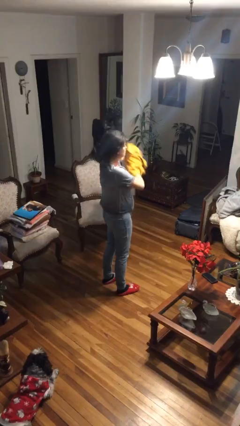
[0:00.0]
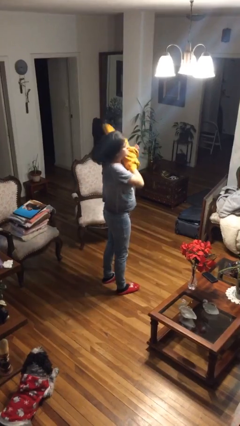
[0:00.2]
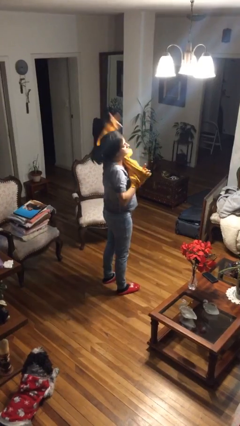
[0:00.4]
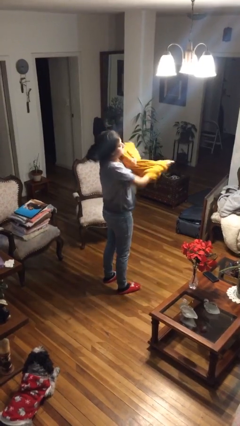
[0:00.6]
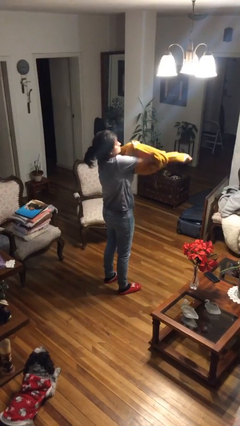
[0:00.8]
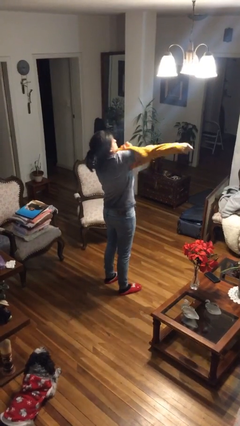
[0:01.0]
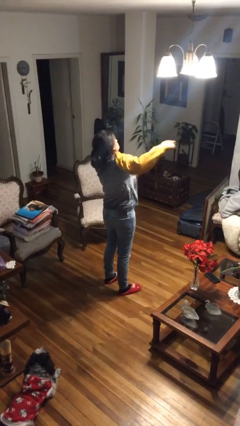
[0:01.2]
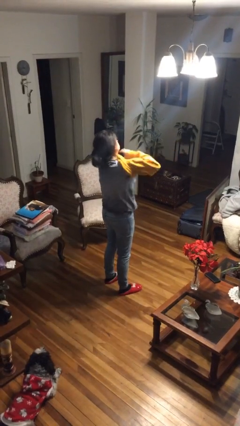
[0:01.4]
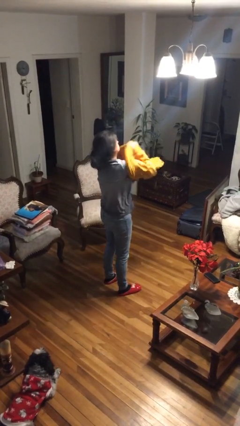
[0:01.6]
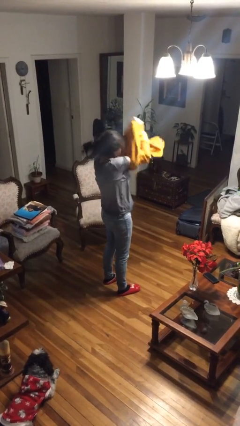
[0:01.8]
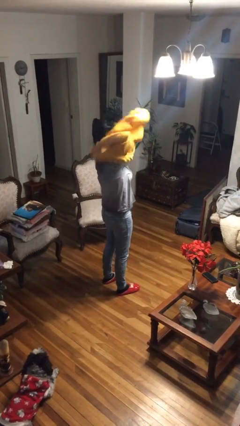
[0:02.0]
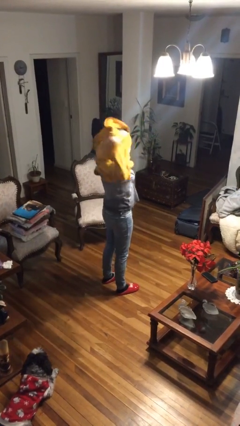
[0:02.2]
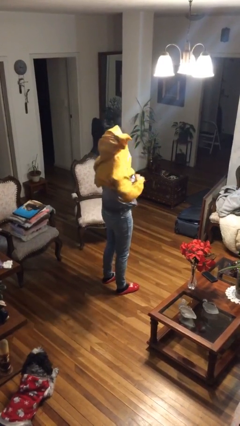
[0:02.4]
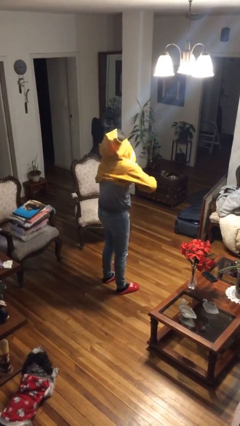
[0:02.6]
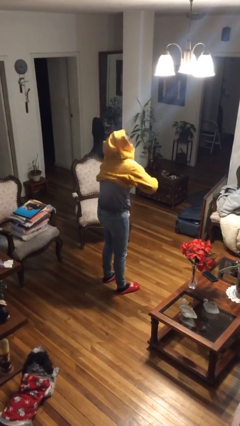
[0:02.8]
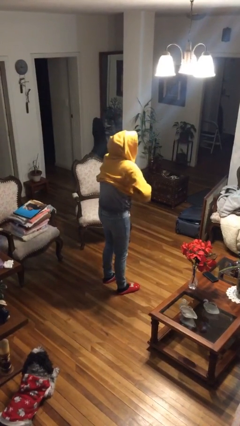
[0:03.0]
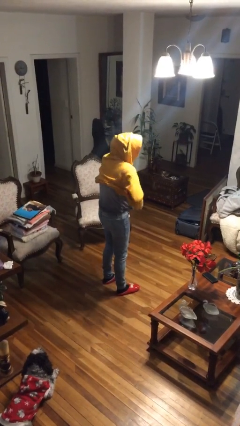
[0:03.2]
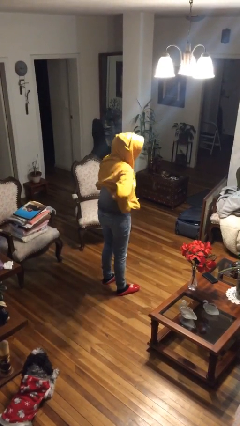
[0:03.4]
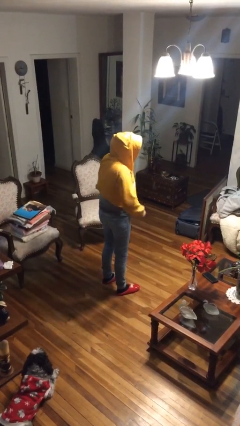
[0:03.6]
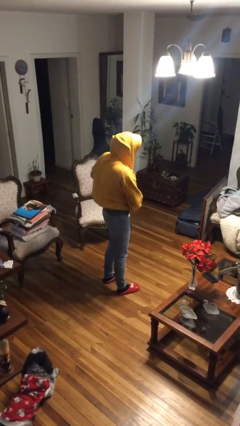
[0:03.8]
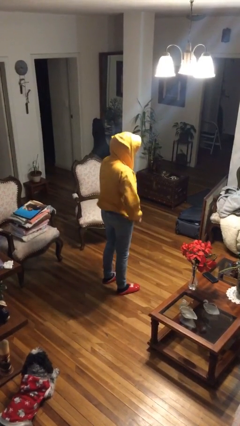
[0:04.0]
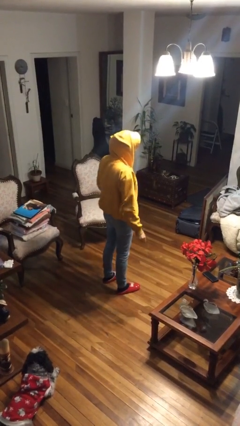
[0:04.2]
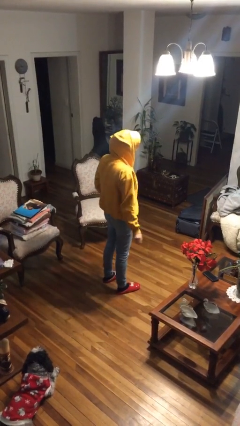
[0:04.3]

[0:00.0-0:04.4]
person puts on hoodie

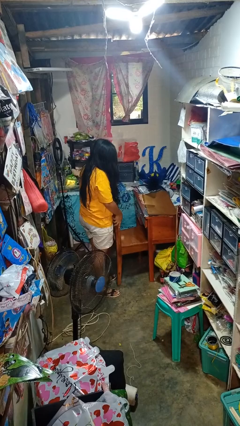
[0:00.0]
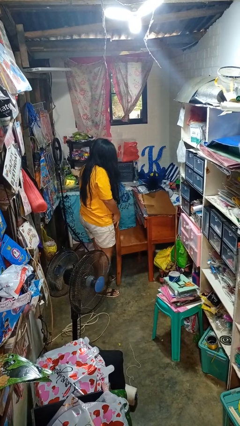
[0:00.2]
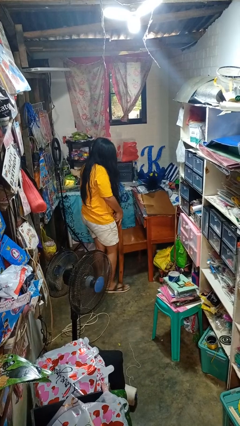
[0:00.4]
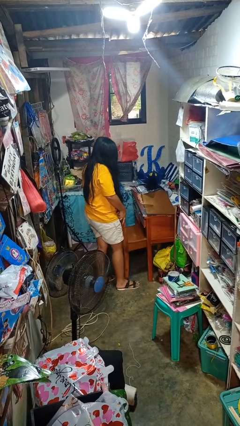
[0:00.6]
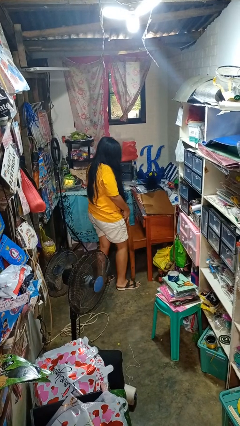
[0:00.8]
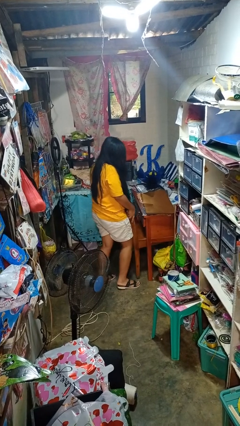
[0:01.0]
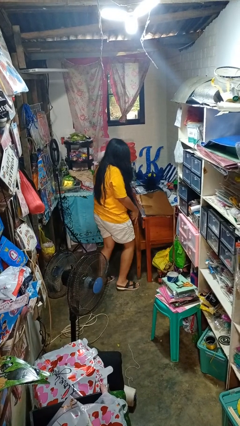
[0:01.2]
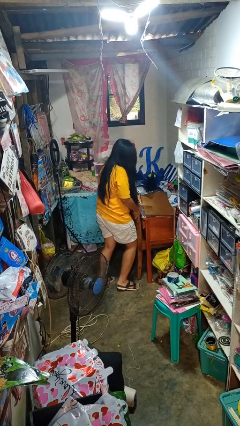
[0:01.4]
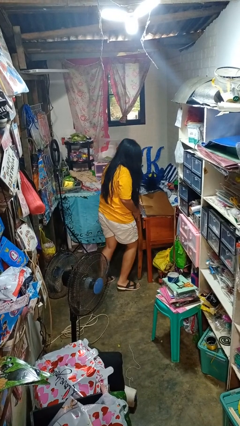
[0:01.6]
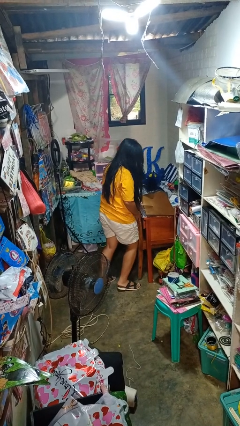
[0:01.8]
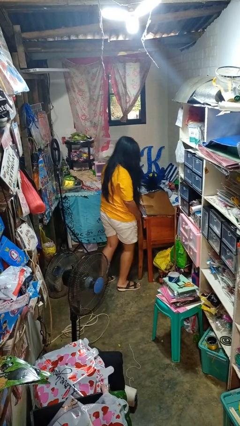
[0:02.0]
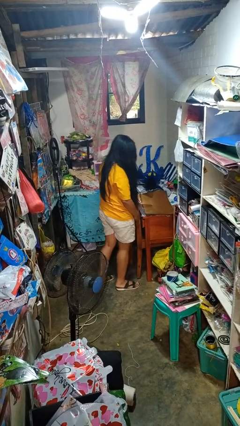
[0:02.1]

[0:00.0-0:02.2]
person pushes in chair

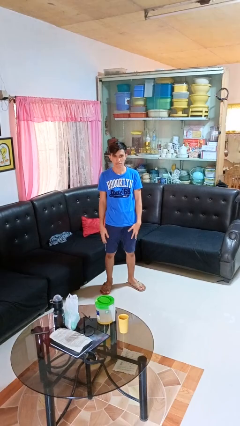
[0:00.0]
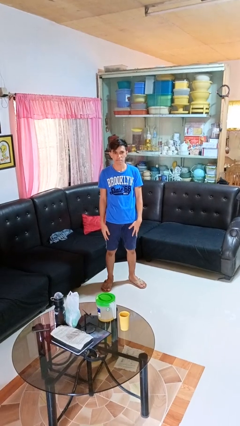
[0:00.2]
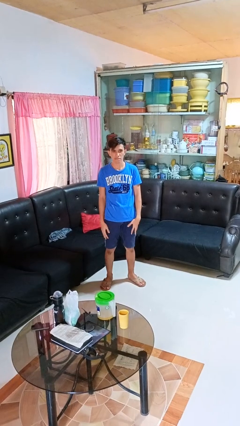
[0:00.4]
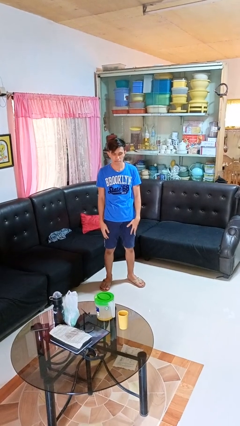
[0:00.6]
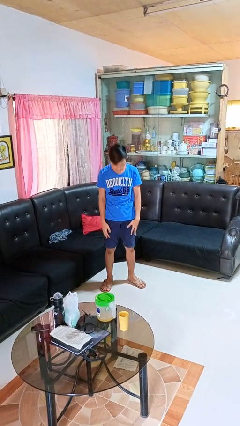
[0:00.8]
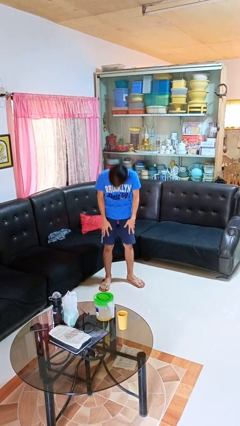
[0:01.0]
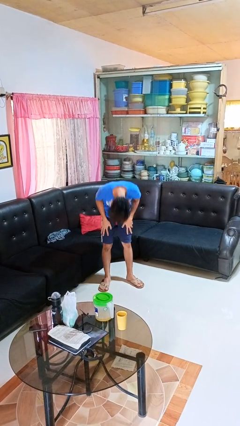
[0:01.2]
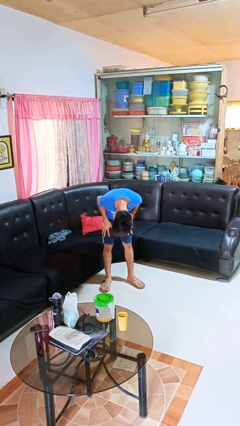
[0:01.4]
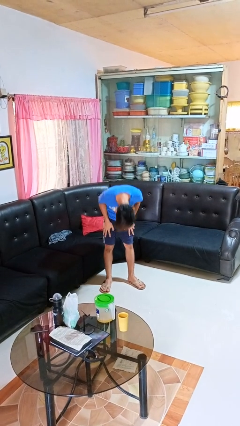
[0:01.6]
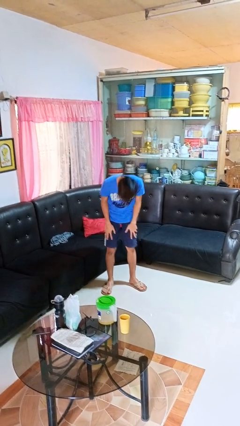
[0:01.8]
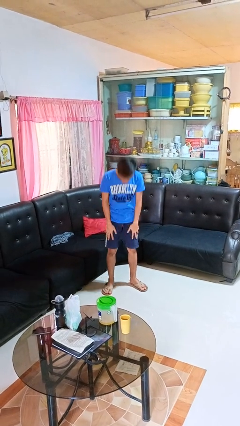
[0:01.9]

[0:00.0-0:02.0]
person bows

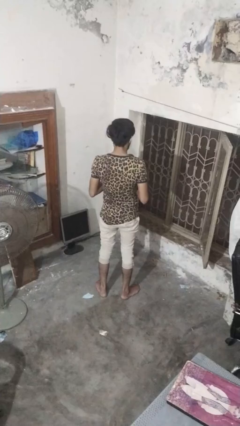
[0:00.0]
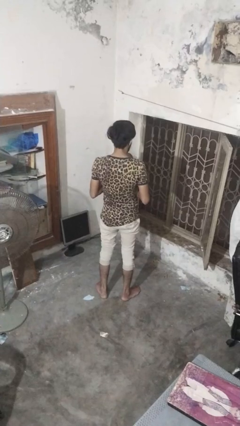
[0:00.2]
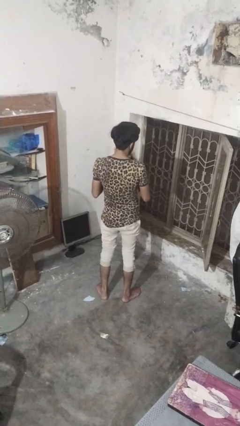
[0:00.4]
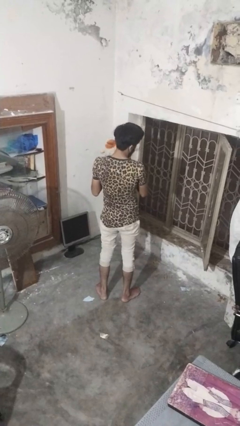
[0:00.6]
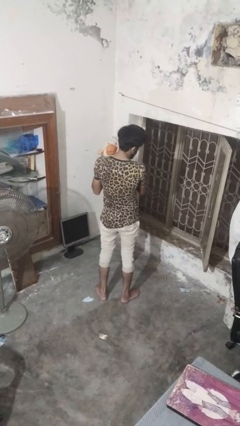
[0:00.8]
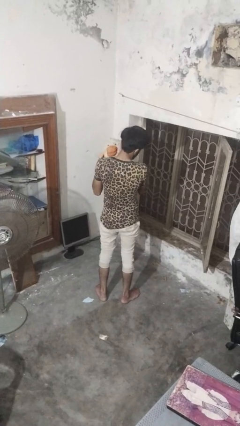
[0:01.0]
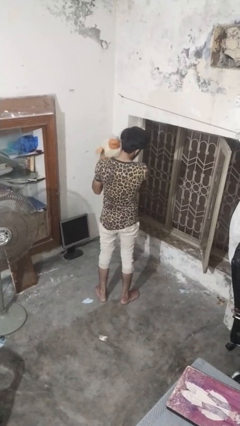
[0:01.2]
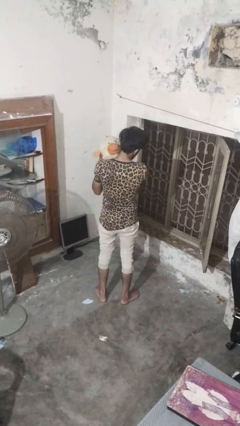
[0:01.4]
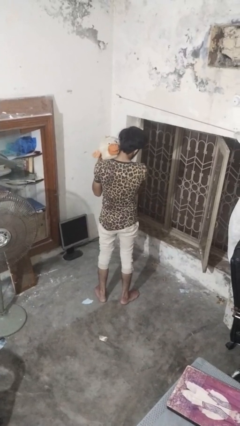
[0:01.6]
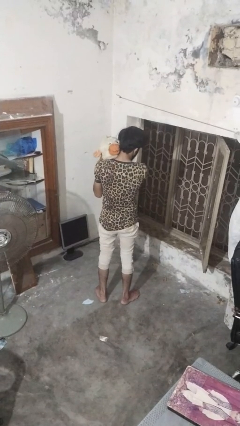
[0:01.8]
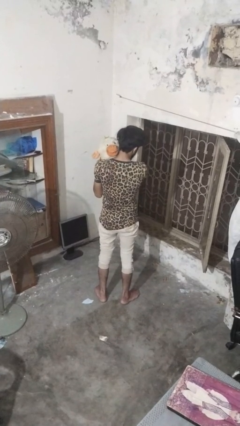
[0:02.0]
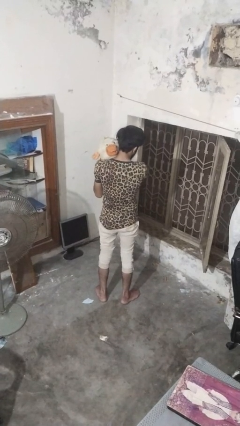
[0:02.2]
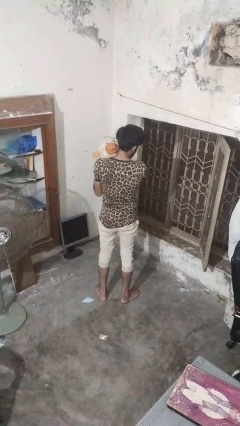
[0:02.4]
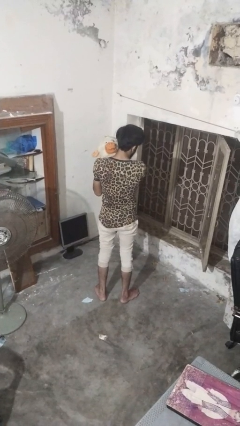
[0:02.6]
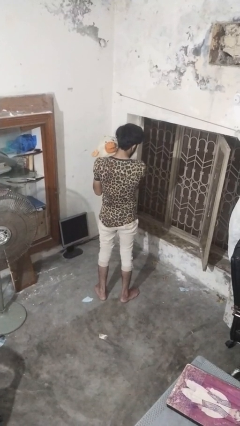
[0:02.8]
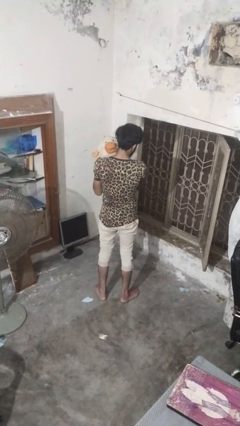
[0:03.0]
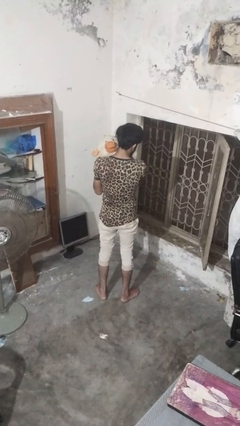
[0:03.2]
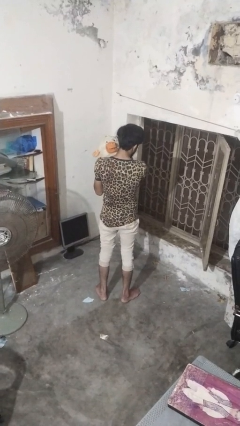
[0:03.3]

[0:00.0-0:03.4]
person hugs stuffed animal

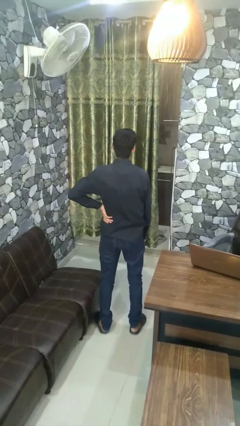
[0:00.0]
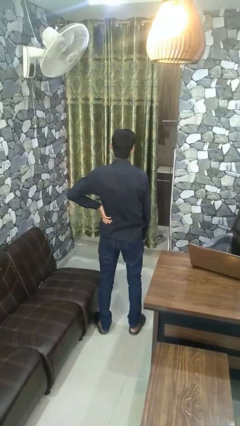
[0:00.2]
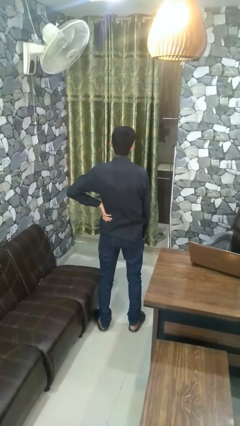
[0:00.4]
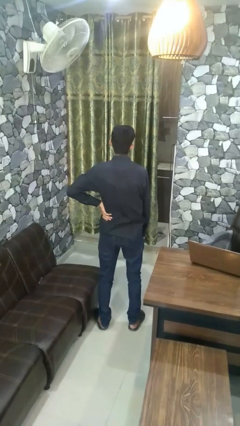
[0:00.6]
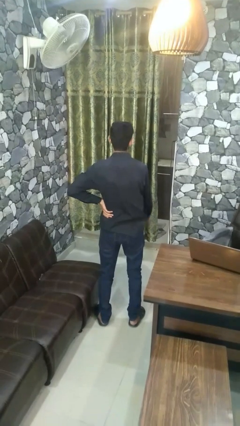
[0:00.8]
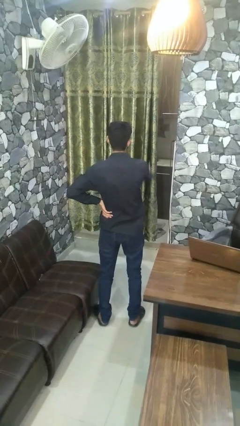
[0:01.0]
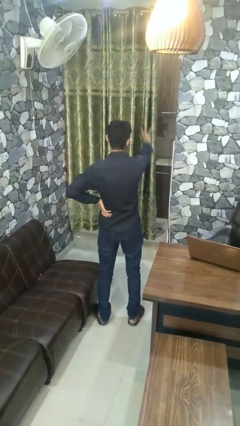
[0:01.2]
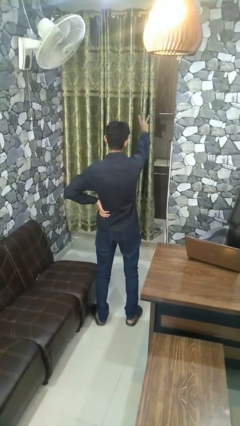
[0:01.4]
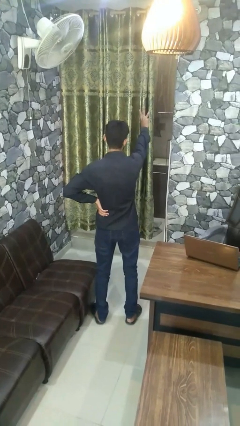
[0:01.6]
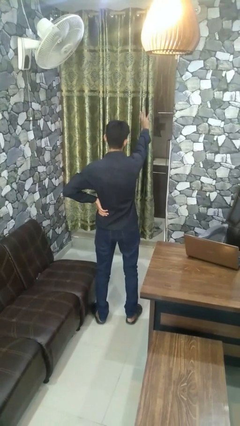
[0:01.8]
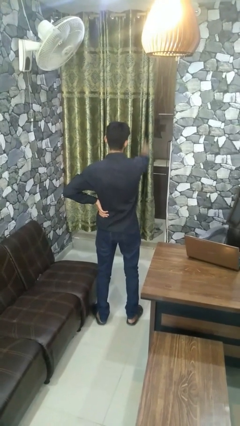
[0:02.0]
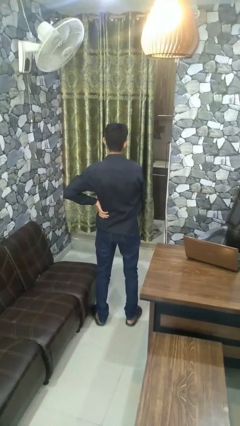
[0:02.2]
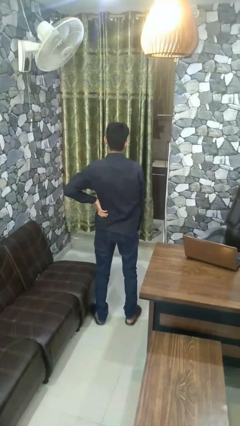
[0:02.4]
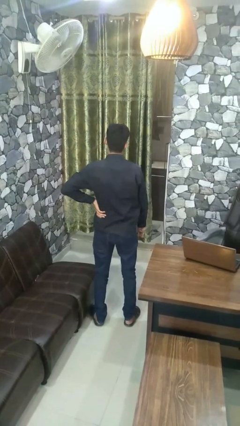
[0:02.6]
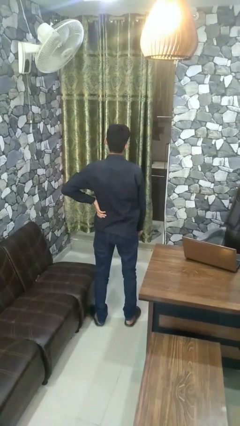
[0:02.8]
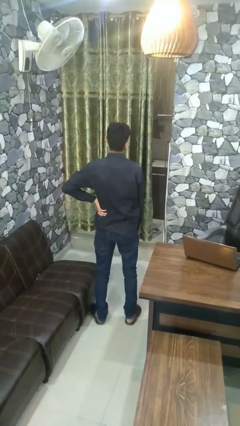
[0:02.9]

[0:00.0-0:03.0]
person gestures number three

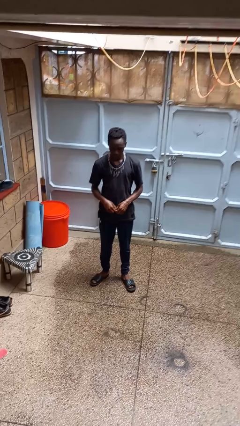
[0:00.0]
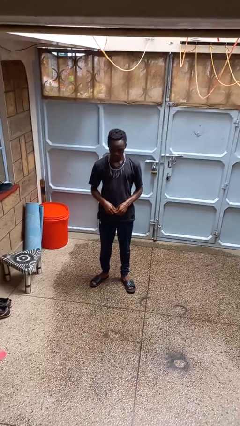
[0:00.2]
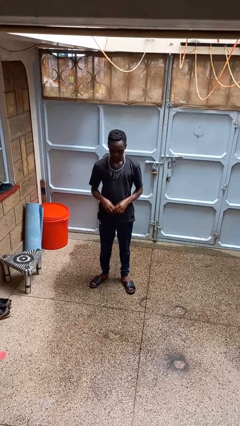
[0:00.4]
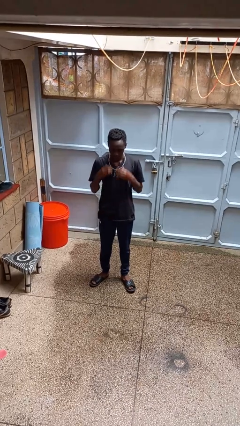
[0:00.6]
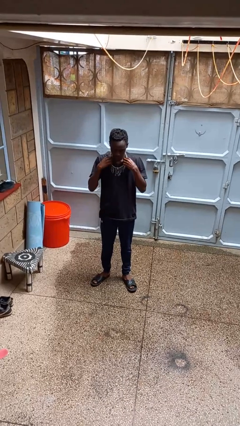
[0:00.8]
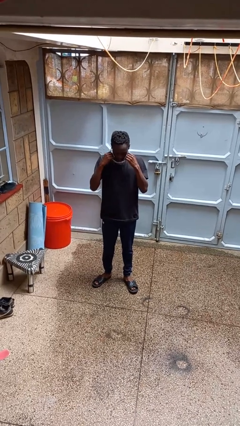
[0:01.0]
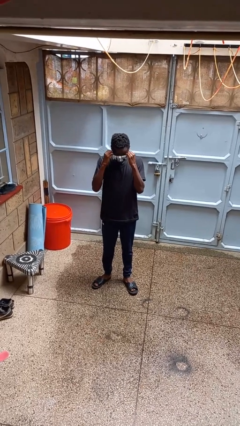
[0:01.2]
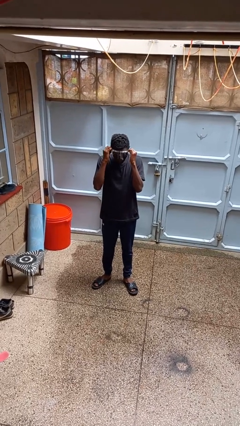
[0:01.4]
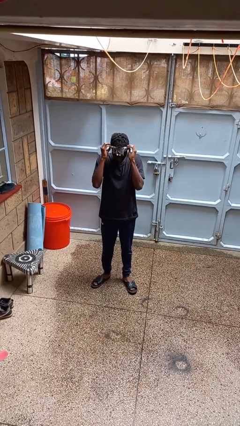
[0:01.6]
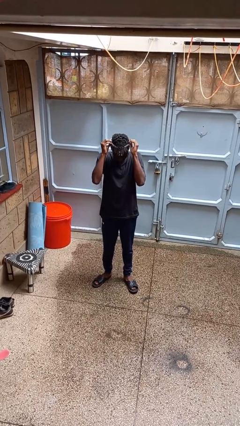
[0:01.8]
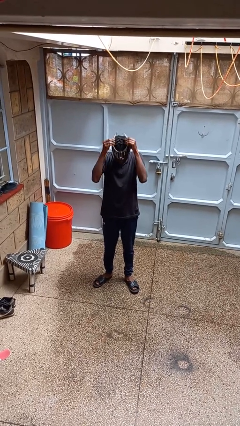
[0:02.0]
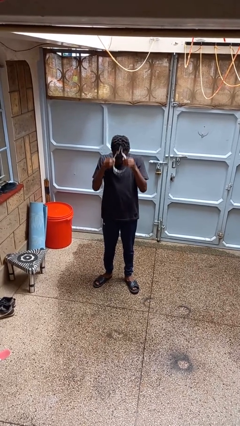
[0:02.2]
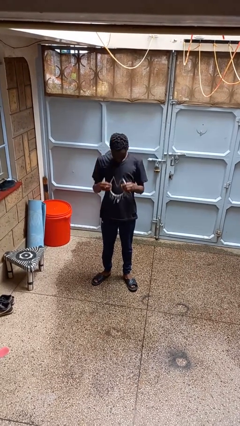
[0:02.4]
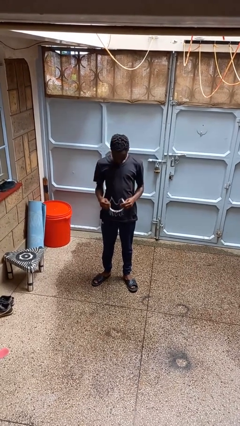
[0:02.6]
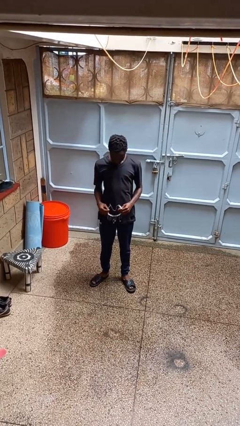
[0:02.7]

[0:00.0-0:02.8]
person takes off necklace
